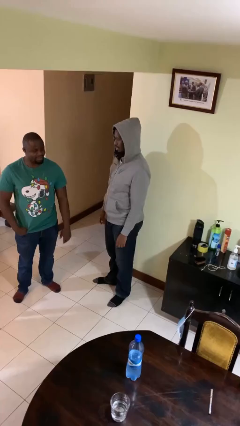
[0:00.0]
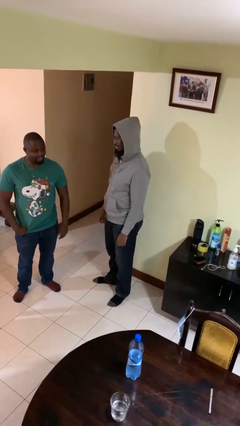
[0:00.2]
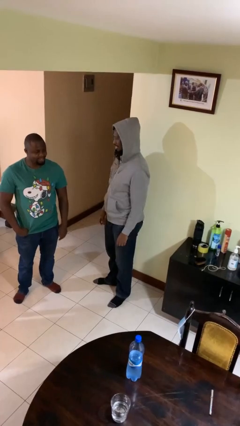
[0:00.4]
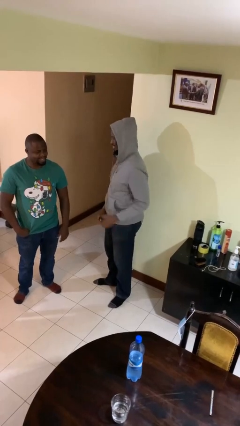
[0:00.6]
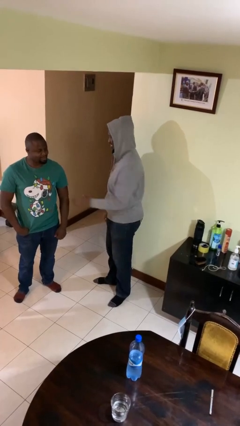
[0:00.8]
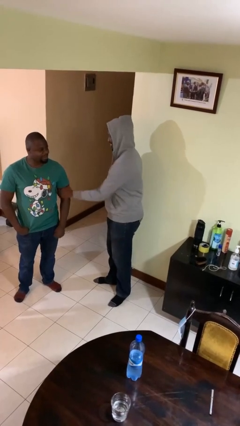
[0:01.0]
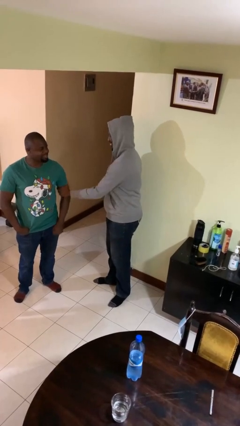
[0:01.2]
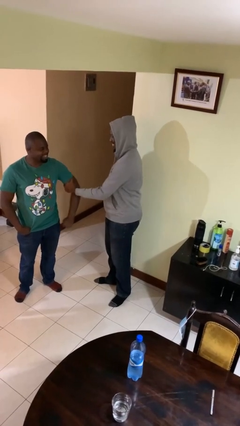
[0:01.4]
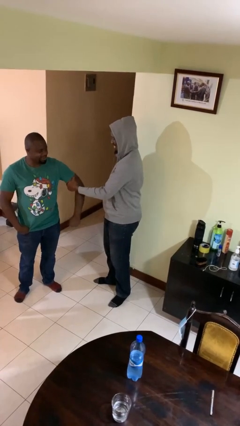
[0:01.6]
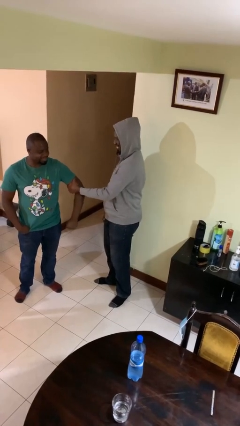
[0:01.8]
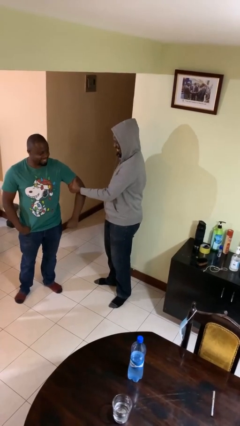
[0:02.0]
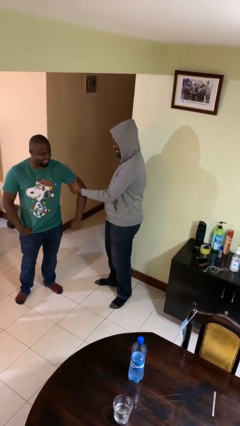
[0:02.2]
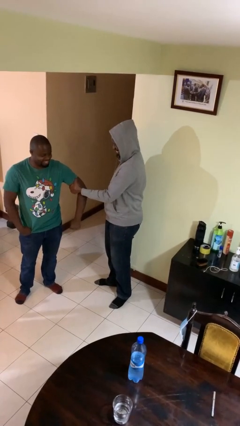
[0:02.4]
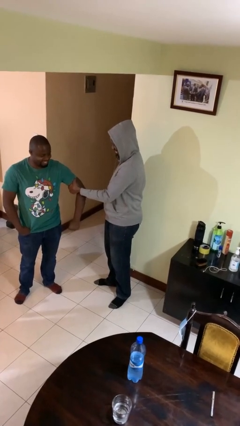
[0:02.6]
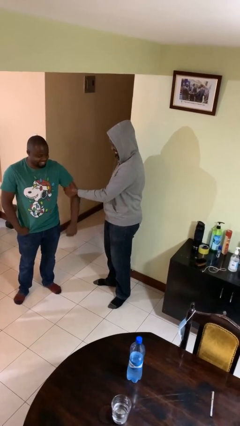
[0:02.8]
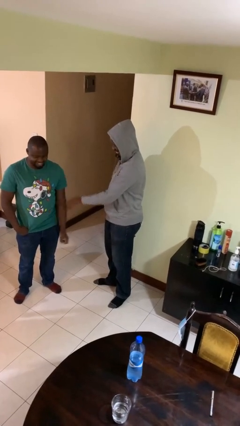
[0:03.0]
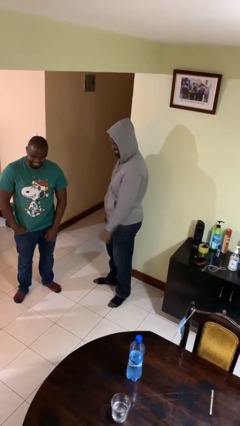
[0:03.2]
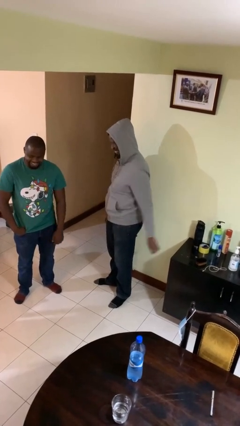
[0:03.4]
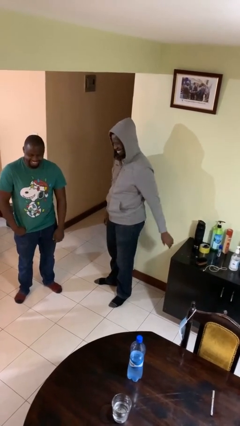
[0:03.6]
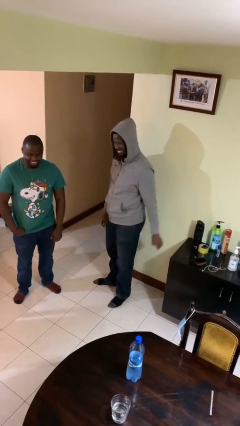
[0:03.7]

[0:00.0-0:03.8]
person grabs person by bicep

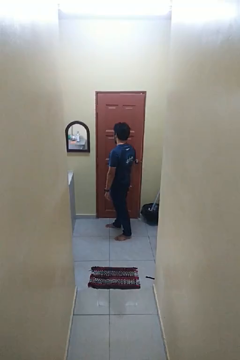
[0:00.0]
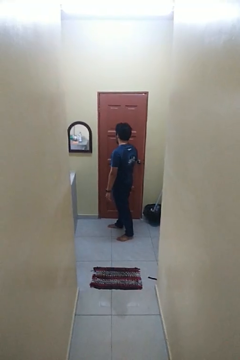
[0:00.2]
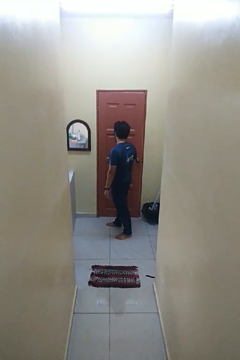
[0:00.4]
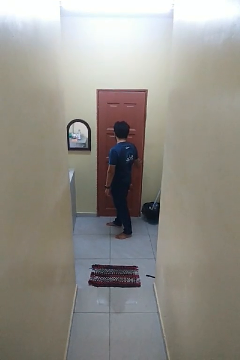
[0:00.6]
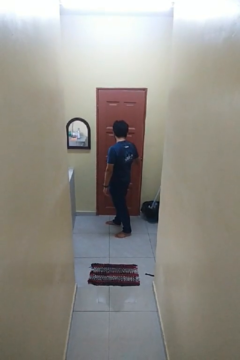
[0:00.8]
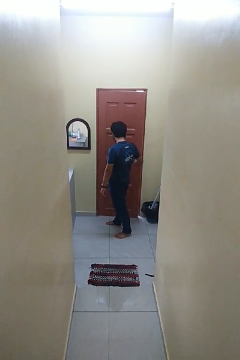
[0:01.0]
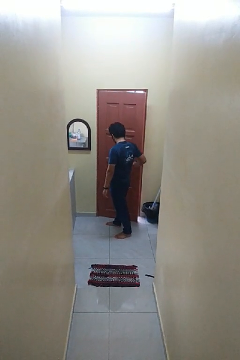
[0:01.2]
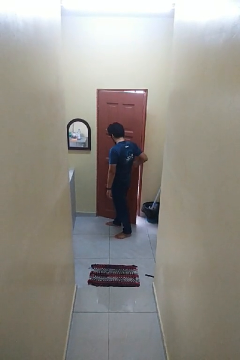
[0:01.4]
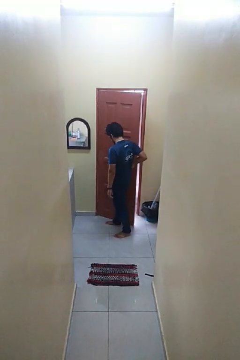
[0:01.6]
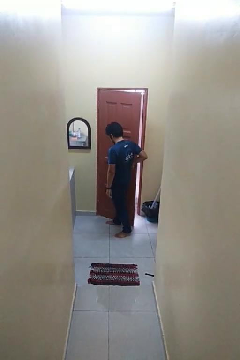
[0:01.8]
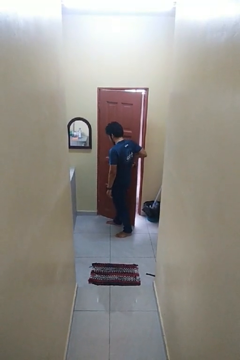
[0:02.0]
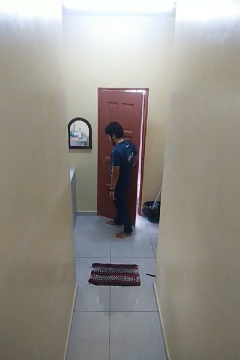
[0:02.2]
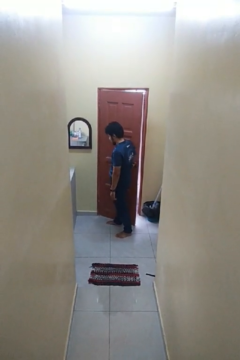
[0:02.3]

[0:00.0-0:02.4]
person opens facility door

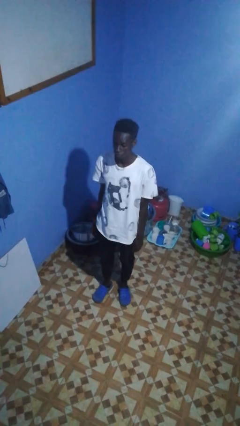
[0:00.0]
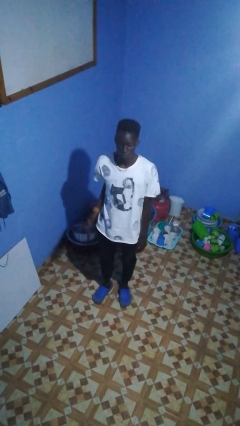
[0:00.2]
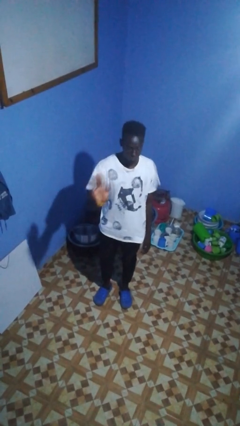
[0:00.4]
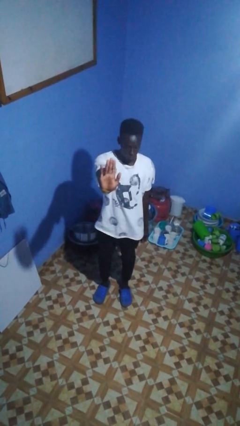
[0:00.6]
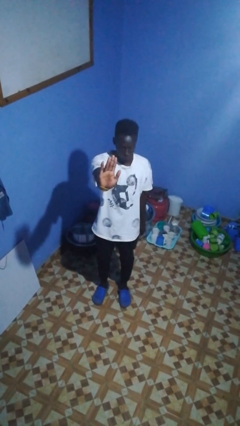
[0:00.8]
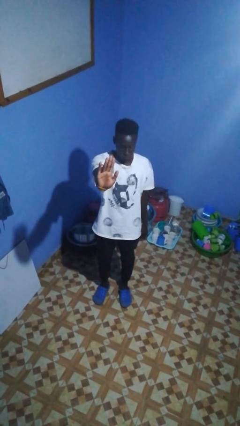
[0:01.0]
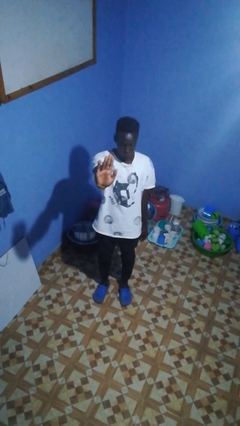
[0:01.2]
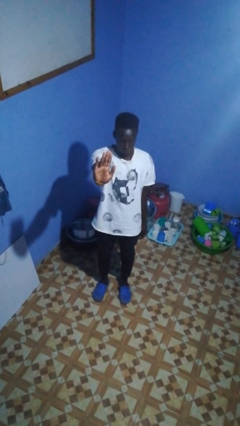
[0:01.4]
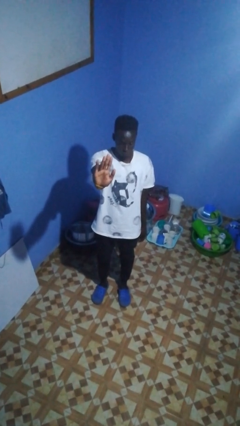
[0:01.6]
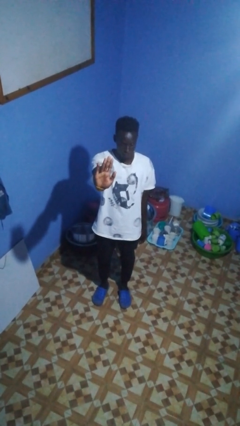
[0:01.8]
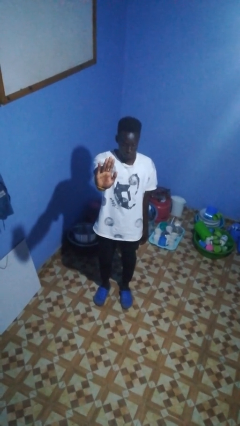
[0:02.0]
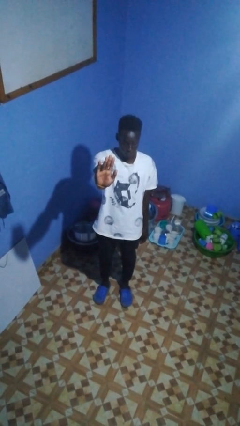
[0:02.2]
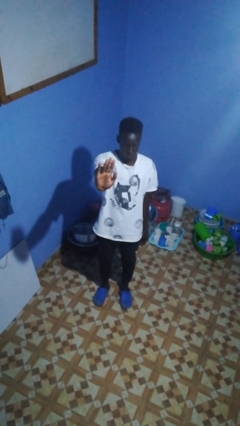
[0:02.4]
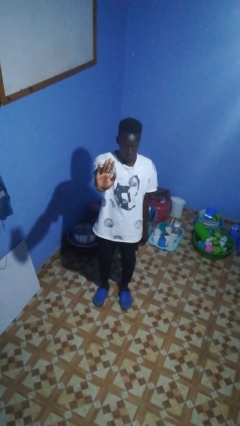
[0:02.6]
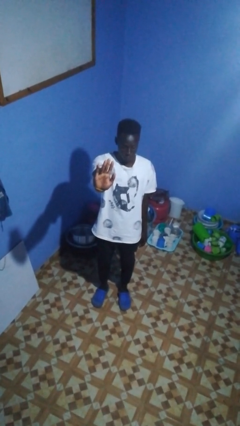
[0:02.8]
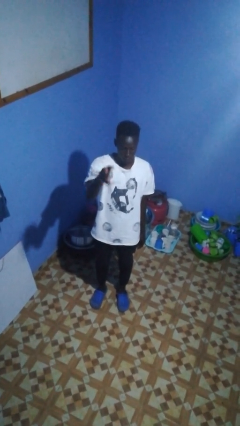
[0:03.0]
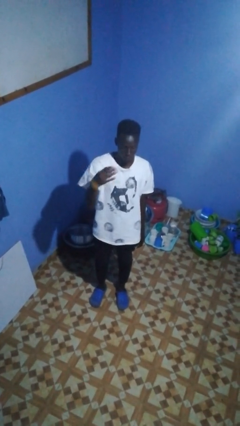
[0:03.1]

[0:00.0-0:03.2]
person gestures stop

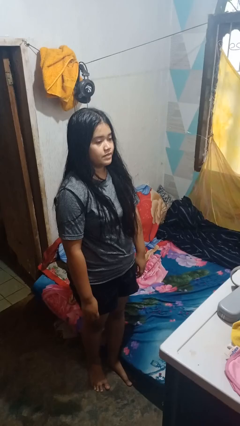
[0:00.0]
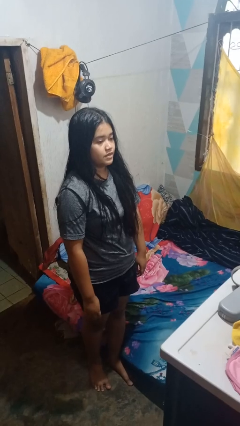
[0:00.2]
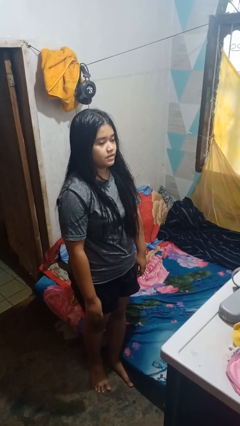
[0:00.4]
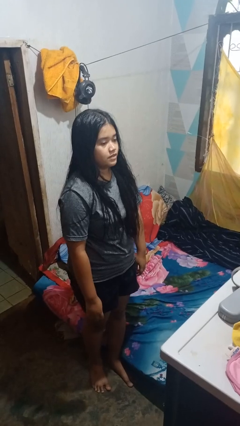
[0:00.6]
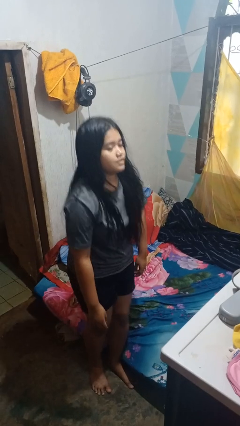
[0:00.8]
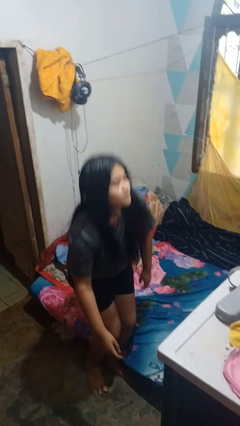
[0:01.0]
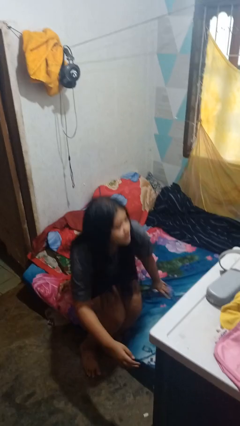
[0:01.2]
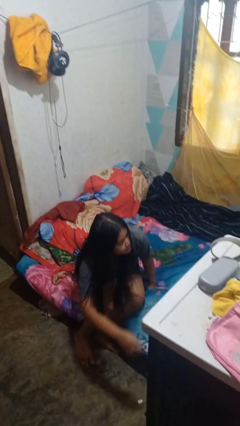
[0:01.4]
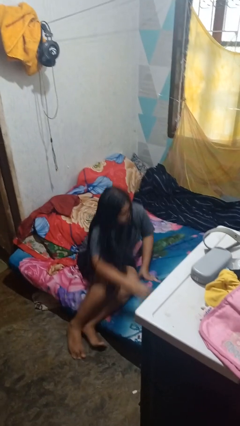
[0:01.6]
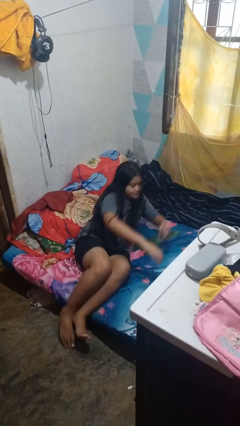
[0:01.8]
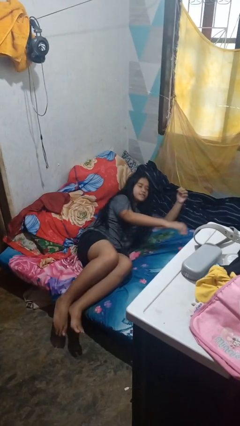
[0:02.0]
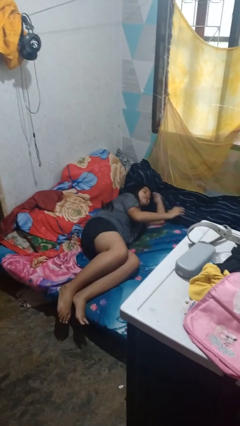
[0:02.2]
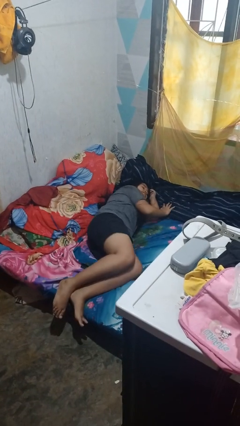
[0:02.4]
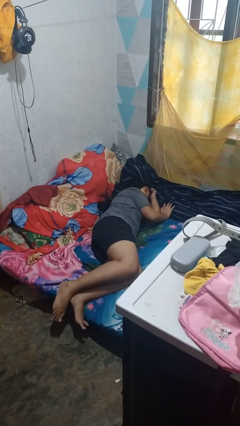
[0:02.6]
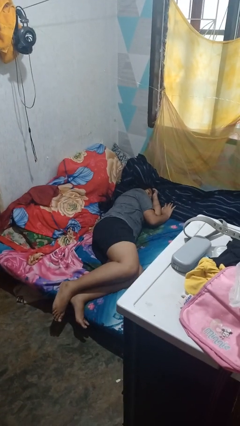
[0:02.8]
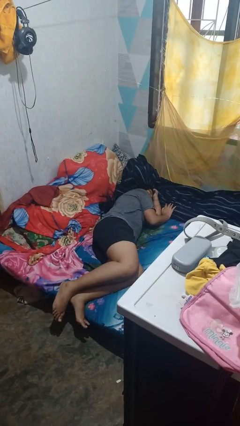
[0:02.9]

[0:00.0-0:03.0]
person lies down on bed

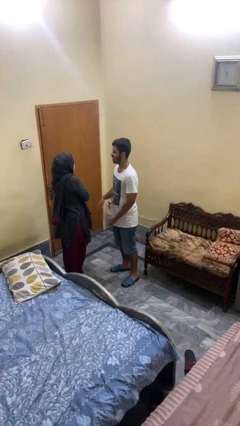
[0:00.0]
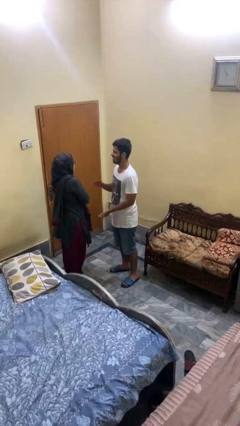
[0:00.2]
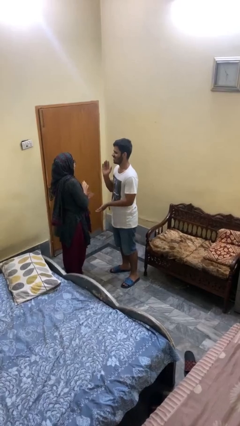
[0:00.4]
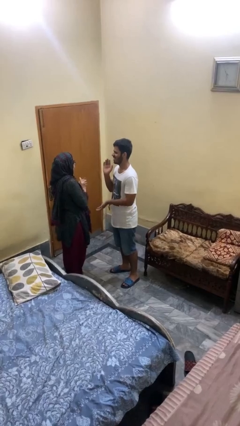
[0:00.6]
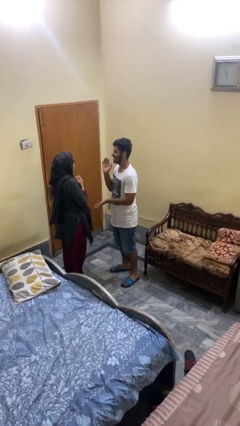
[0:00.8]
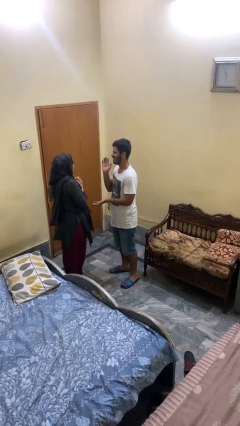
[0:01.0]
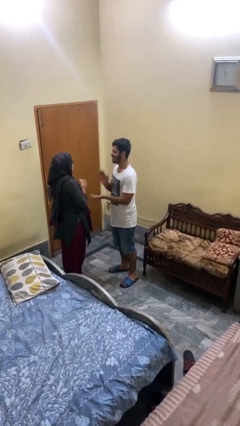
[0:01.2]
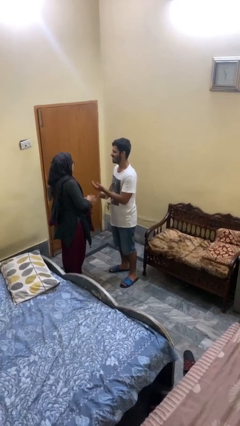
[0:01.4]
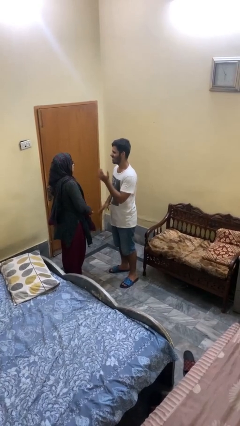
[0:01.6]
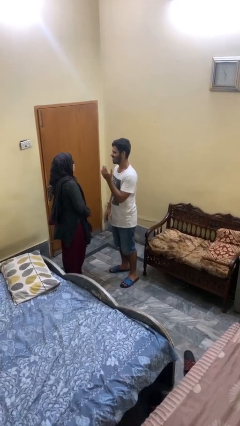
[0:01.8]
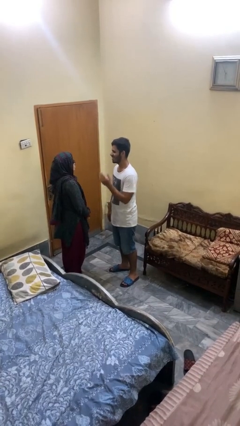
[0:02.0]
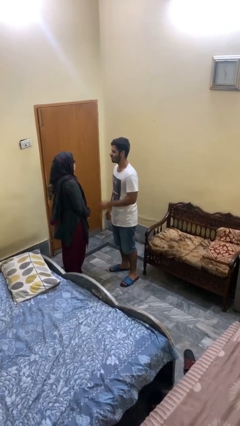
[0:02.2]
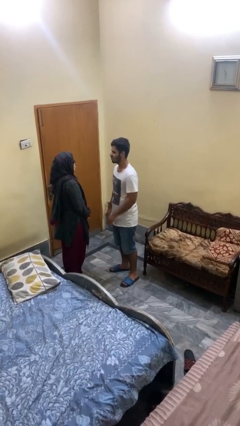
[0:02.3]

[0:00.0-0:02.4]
person laughs with person

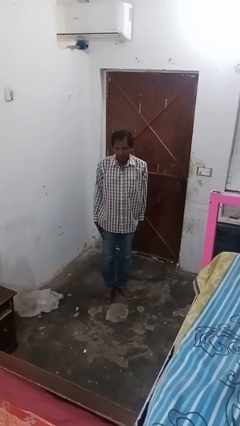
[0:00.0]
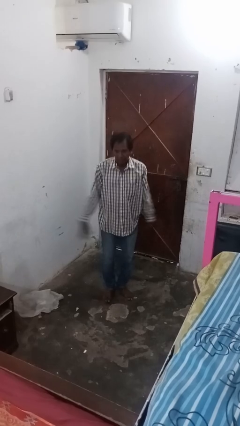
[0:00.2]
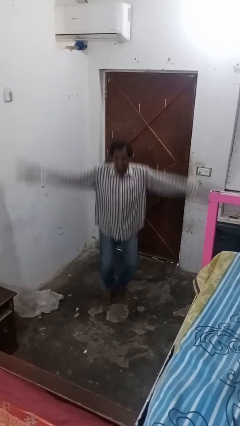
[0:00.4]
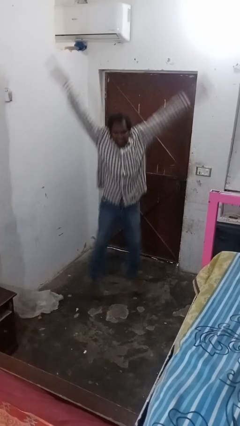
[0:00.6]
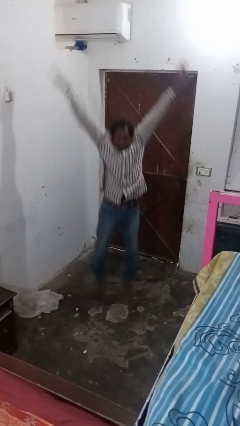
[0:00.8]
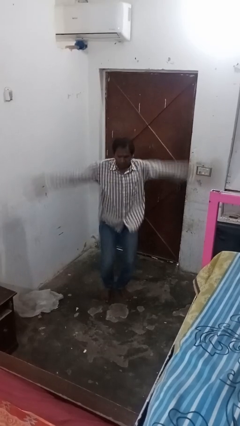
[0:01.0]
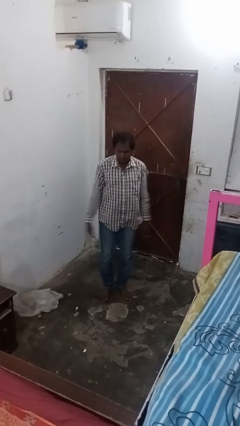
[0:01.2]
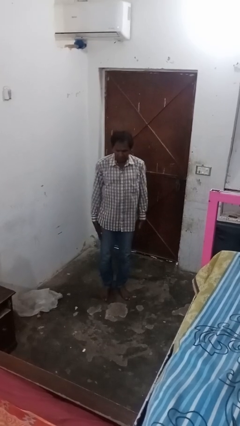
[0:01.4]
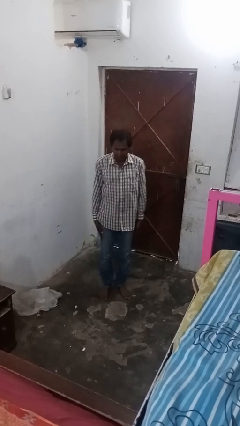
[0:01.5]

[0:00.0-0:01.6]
person exercises with jumping jacks

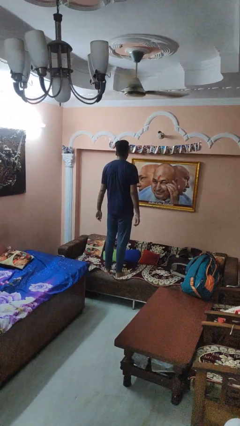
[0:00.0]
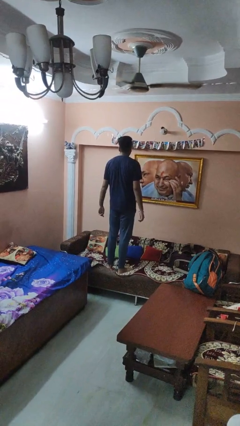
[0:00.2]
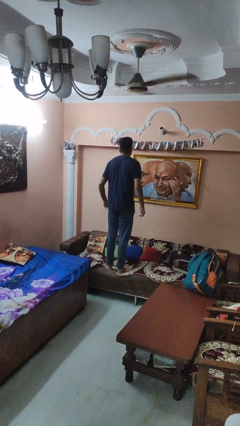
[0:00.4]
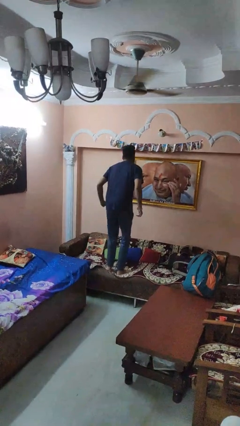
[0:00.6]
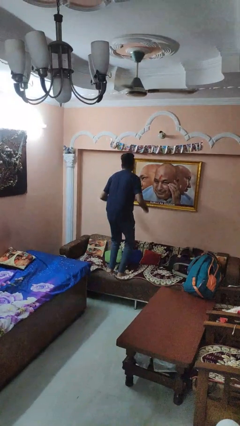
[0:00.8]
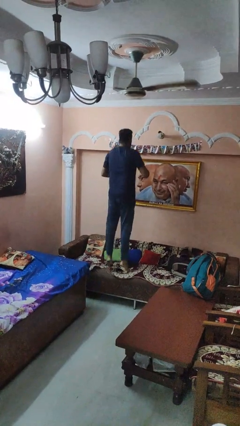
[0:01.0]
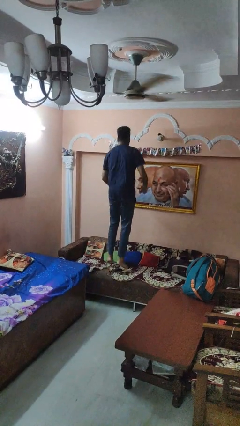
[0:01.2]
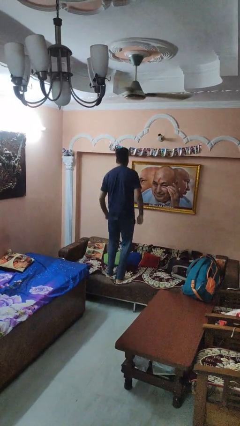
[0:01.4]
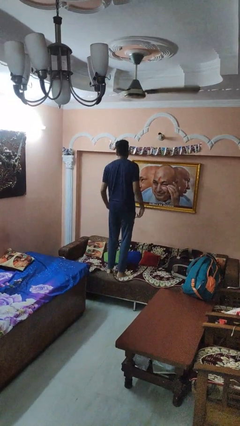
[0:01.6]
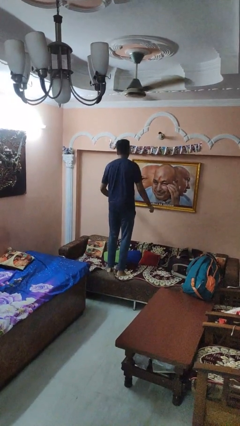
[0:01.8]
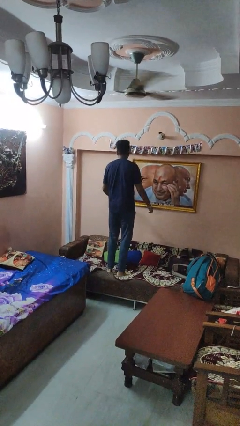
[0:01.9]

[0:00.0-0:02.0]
person jumps on couch
